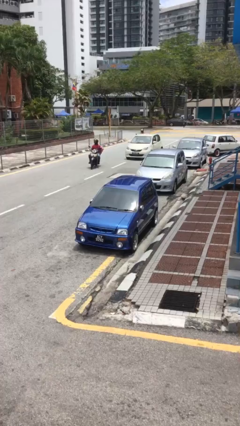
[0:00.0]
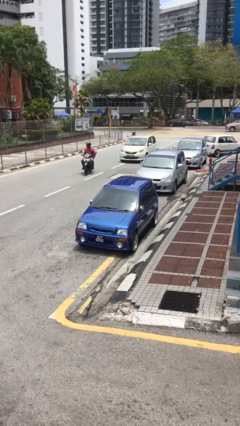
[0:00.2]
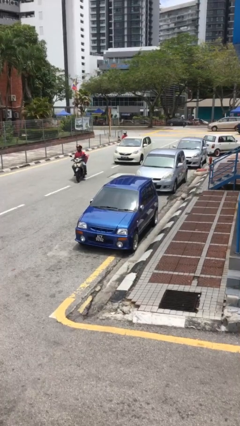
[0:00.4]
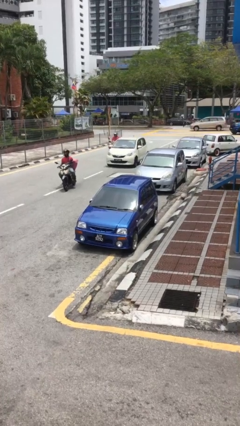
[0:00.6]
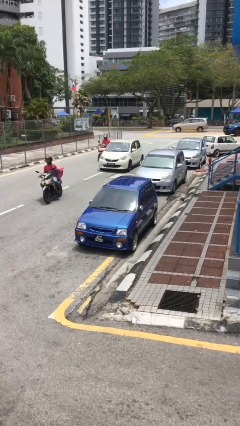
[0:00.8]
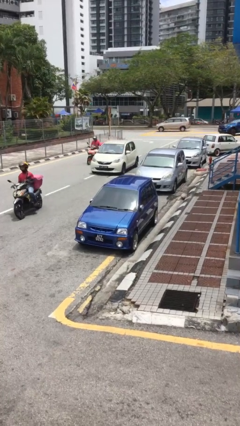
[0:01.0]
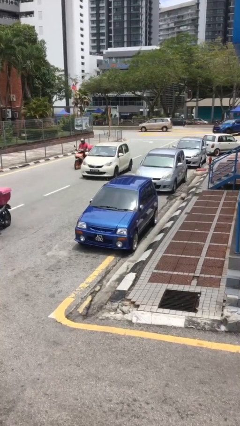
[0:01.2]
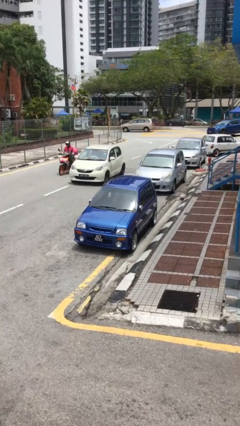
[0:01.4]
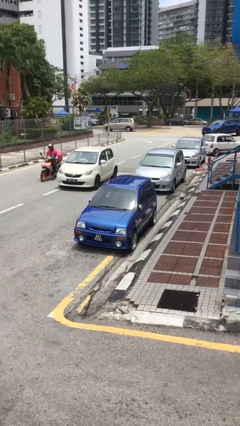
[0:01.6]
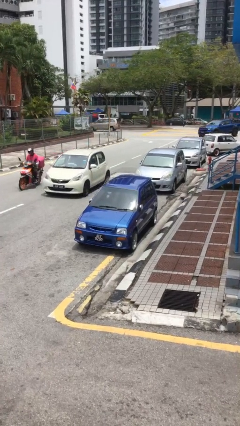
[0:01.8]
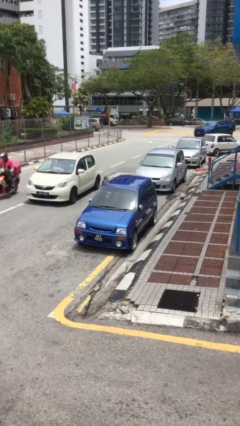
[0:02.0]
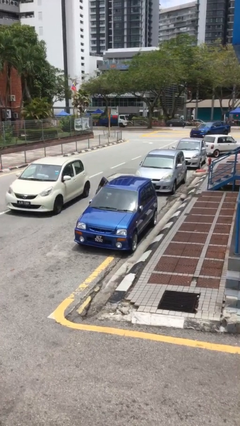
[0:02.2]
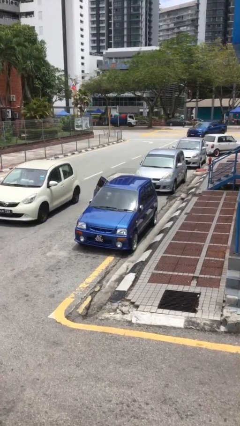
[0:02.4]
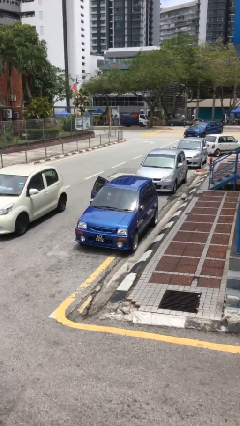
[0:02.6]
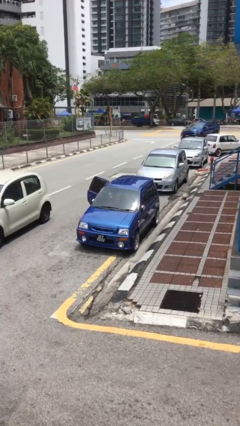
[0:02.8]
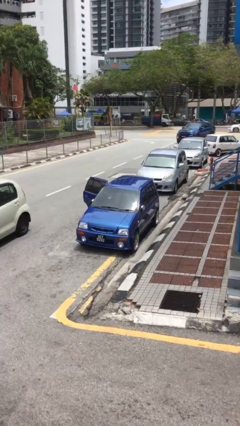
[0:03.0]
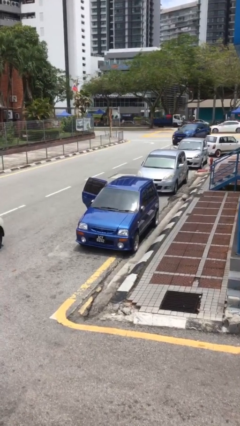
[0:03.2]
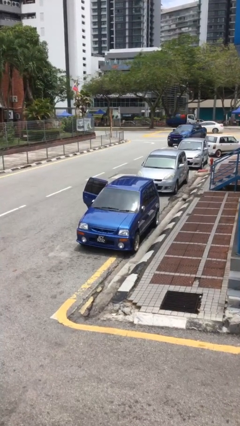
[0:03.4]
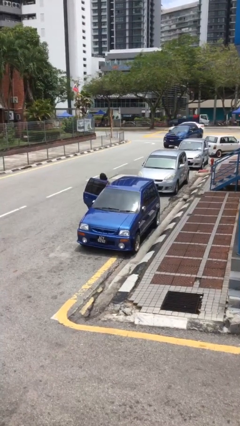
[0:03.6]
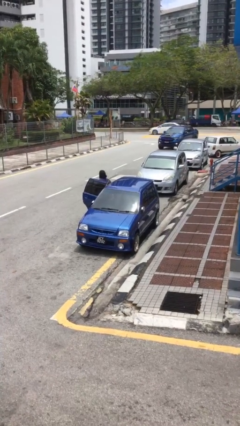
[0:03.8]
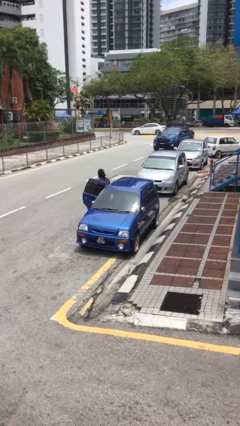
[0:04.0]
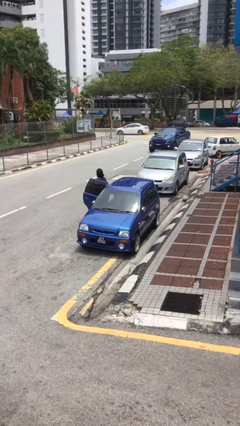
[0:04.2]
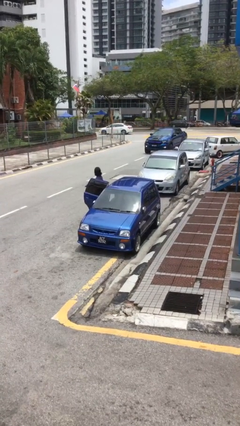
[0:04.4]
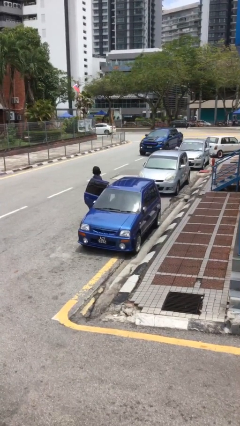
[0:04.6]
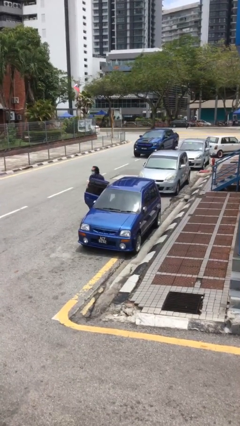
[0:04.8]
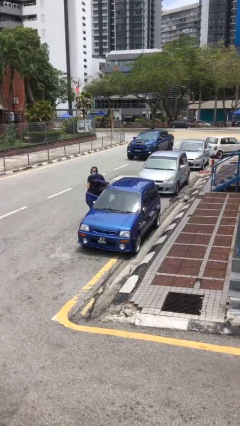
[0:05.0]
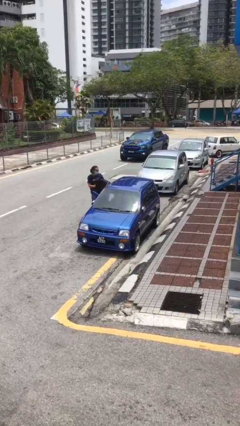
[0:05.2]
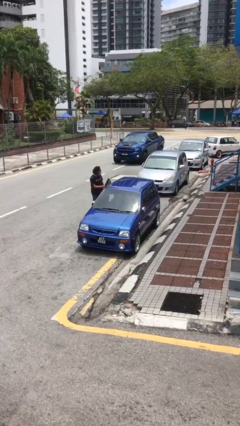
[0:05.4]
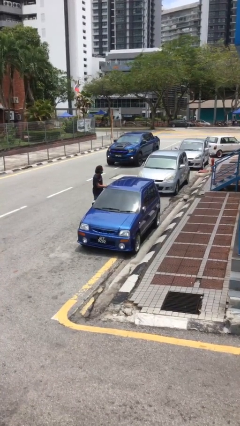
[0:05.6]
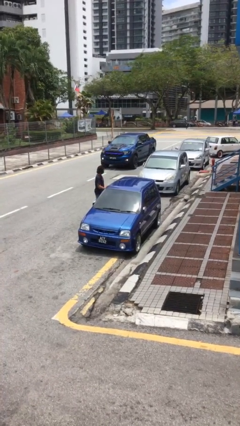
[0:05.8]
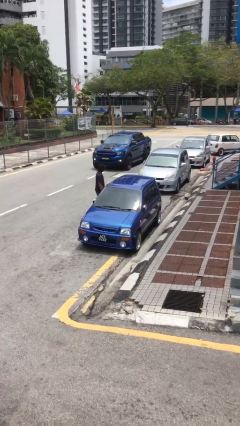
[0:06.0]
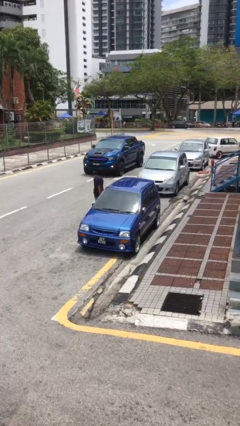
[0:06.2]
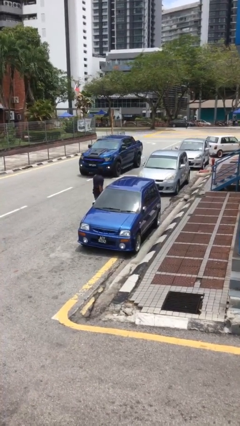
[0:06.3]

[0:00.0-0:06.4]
car drops off person

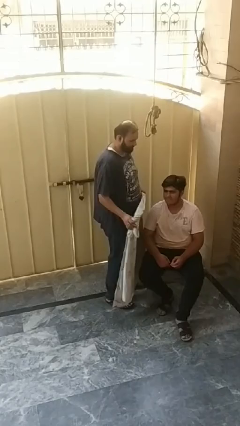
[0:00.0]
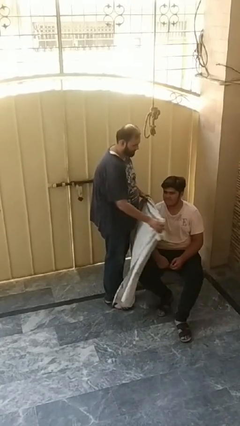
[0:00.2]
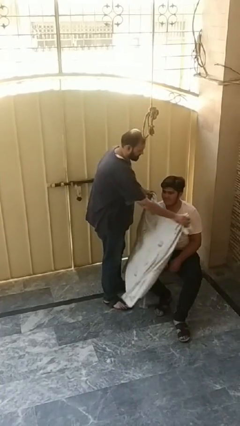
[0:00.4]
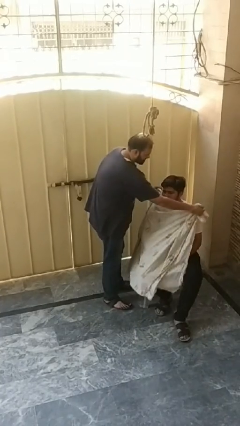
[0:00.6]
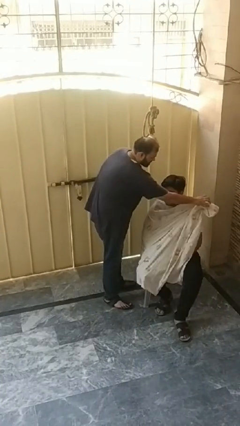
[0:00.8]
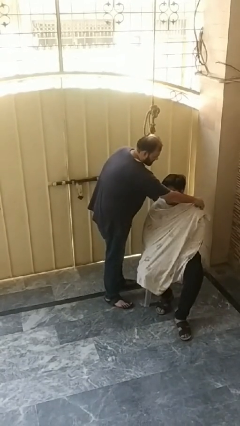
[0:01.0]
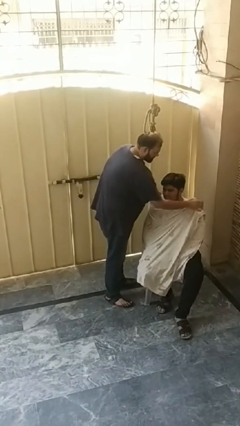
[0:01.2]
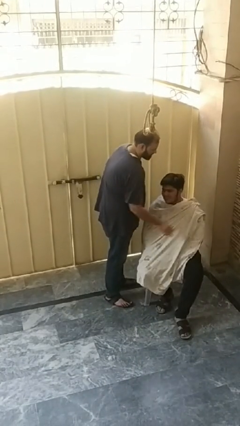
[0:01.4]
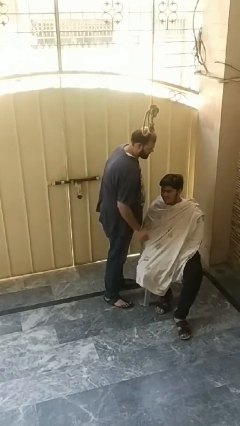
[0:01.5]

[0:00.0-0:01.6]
person covers friend with blanket

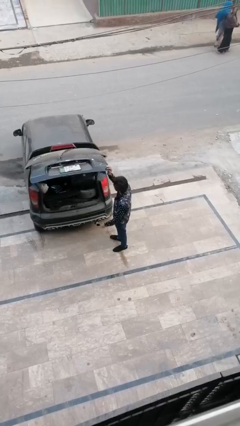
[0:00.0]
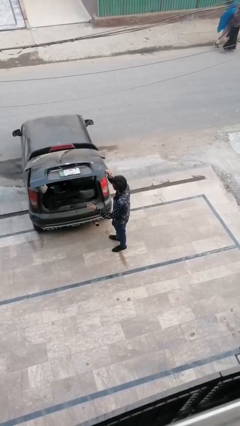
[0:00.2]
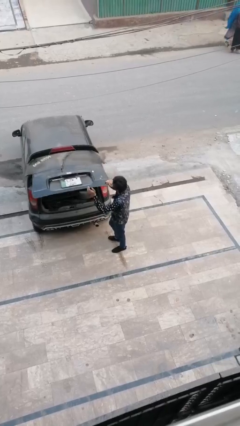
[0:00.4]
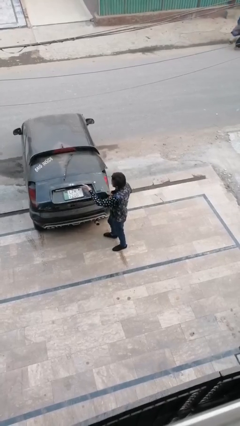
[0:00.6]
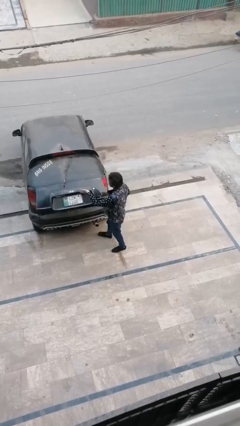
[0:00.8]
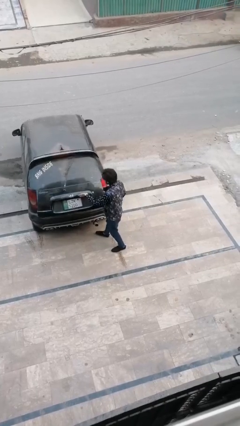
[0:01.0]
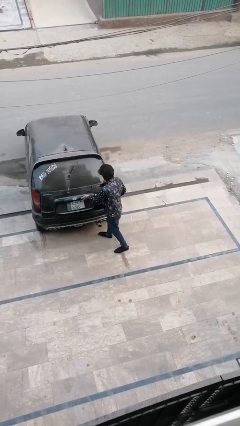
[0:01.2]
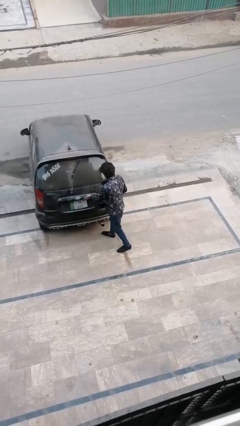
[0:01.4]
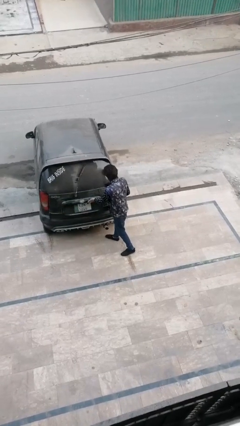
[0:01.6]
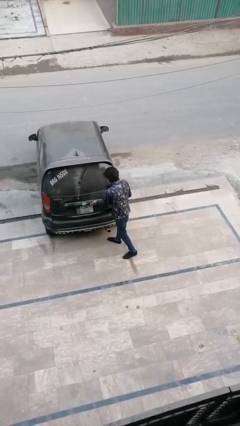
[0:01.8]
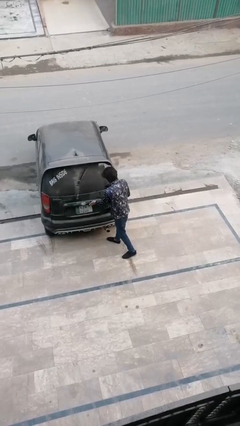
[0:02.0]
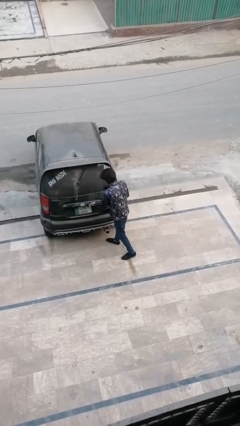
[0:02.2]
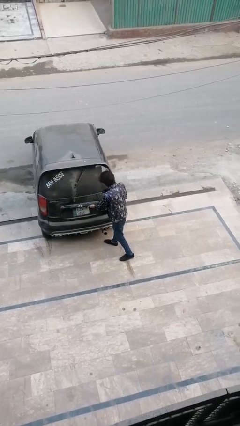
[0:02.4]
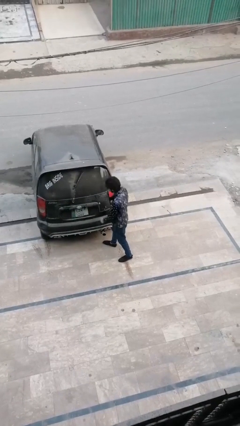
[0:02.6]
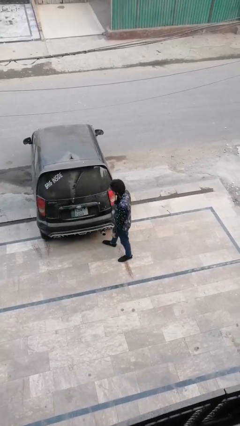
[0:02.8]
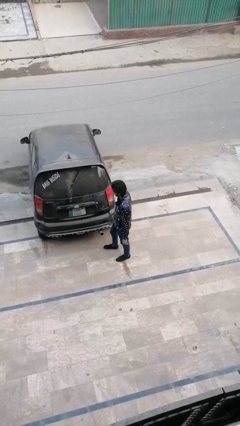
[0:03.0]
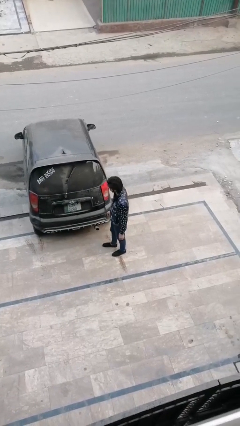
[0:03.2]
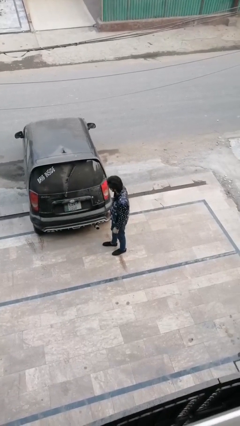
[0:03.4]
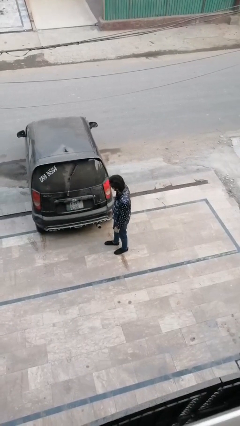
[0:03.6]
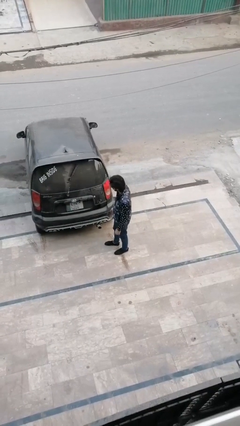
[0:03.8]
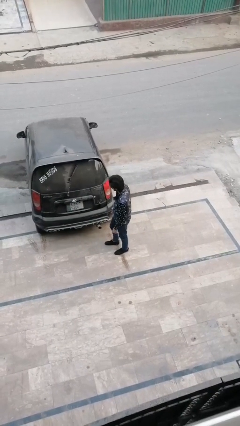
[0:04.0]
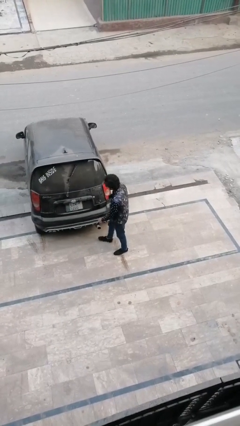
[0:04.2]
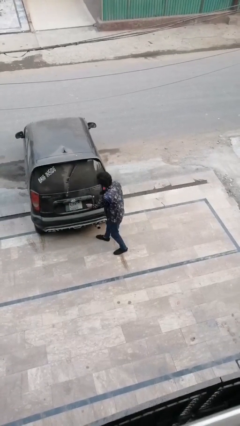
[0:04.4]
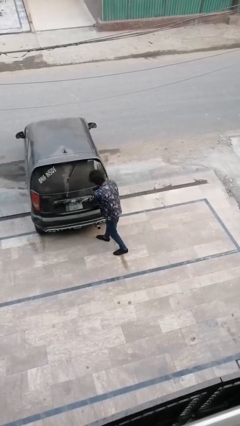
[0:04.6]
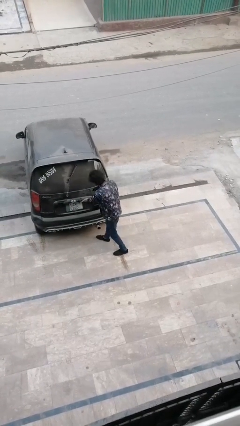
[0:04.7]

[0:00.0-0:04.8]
person closes car trunk

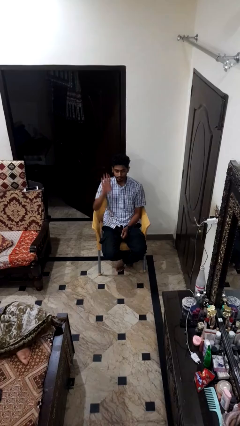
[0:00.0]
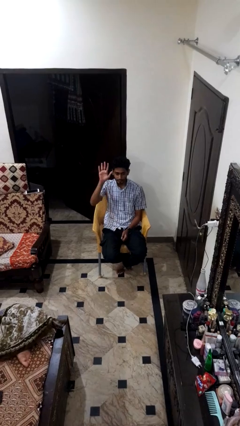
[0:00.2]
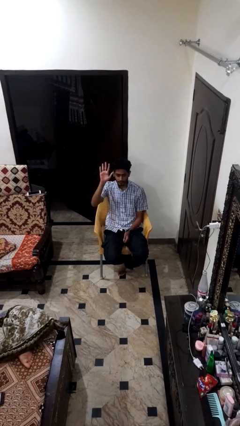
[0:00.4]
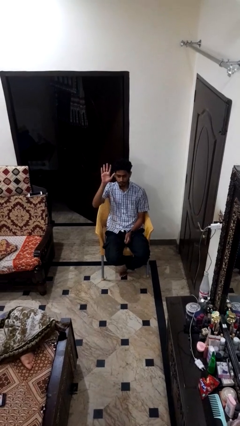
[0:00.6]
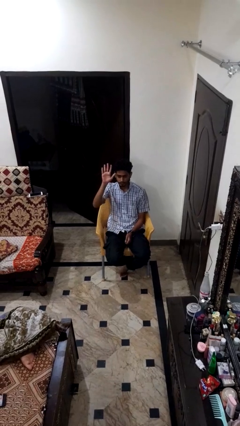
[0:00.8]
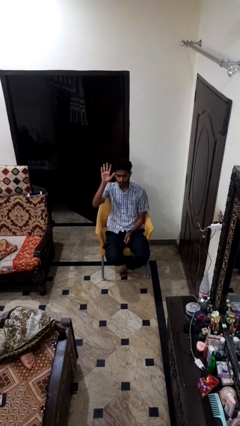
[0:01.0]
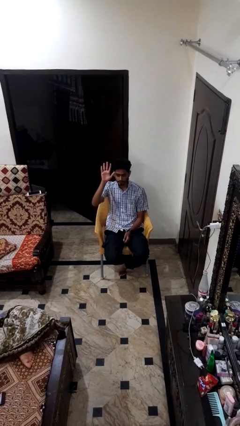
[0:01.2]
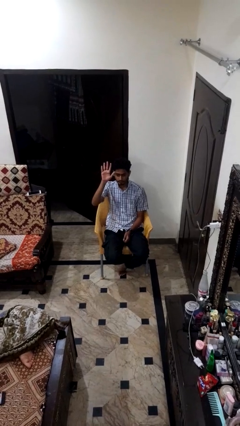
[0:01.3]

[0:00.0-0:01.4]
person gestures raise hand

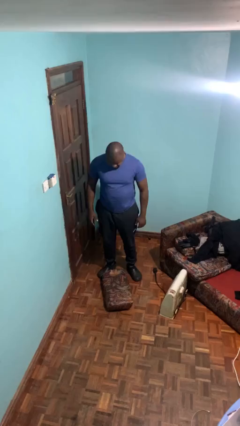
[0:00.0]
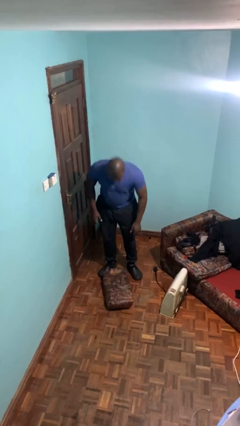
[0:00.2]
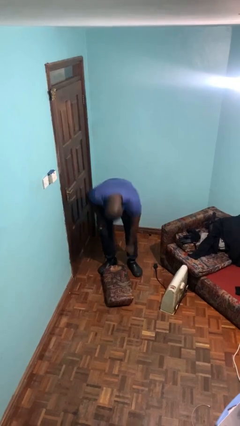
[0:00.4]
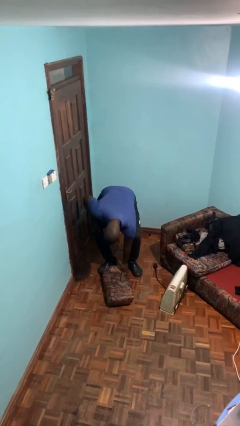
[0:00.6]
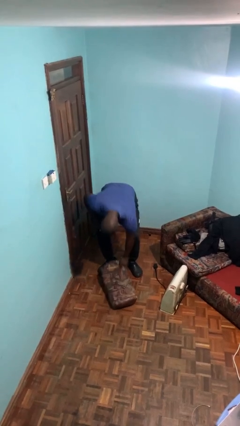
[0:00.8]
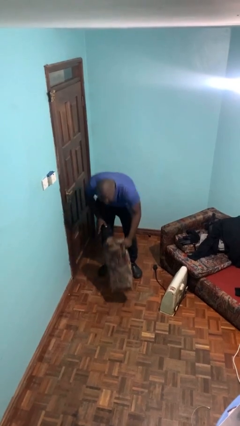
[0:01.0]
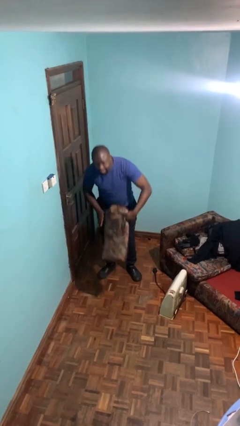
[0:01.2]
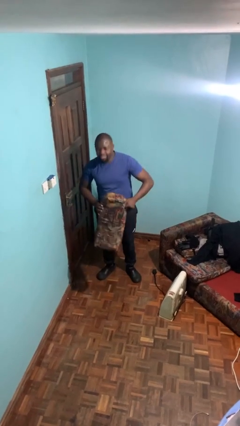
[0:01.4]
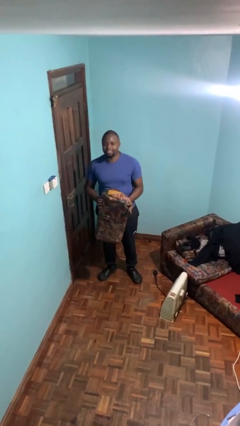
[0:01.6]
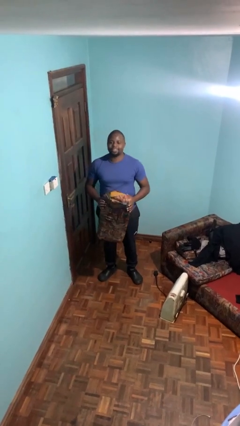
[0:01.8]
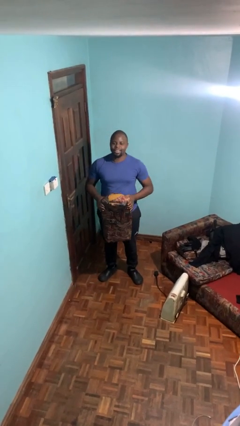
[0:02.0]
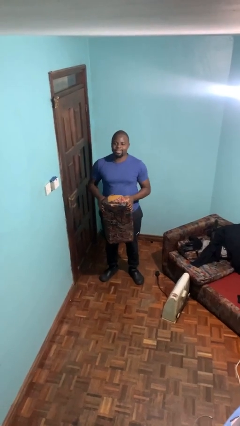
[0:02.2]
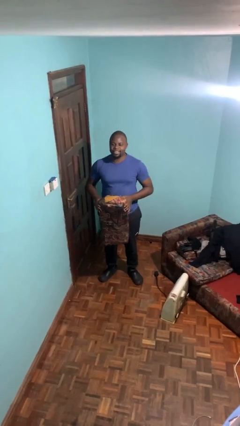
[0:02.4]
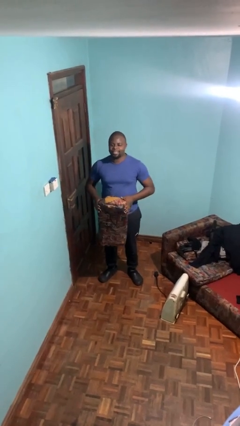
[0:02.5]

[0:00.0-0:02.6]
person picks up object from floor

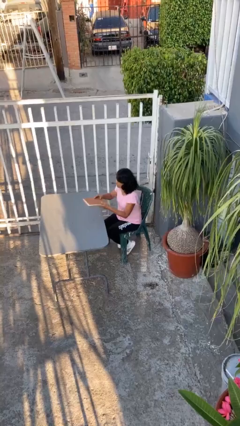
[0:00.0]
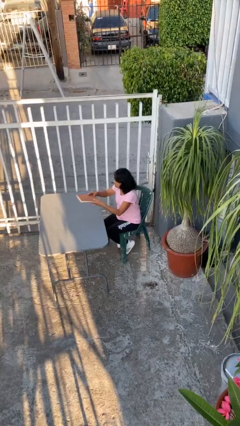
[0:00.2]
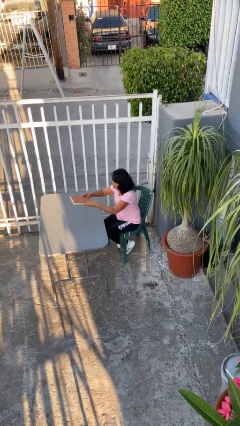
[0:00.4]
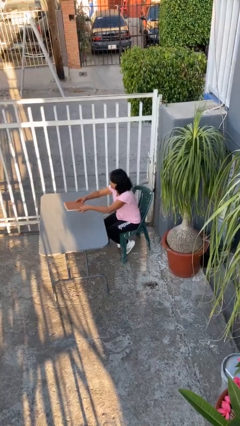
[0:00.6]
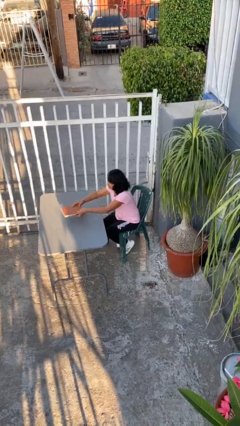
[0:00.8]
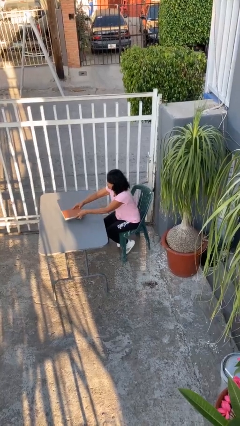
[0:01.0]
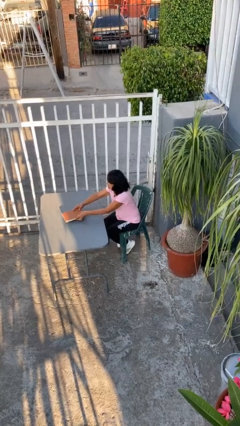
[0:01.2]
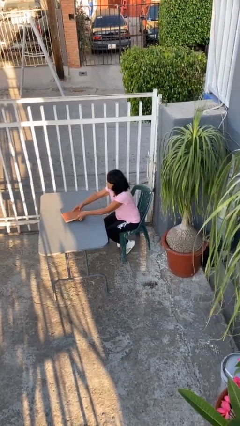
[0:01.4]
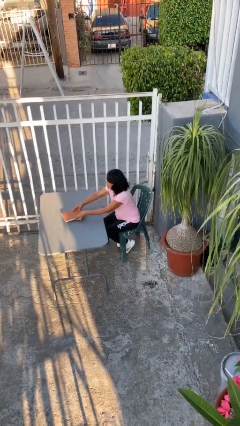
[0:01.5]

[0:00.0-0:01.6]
person puts down object on table
